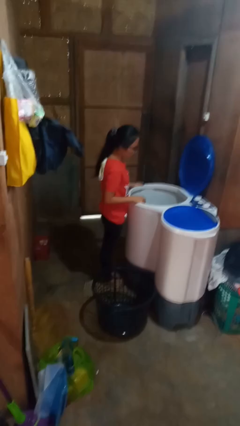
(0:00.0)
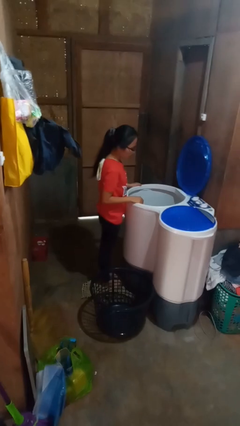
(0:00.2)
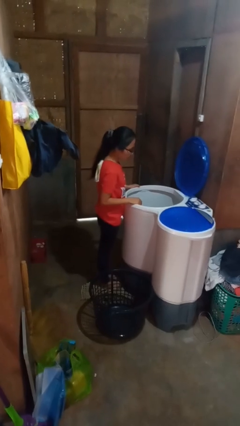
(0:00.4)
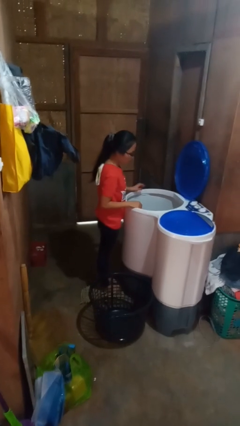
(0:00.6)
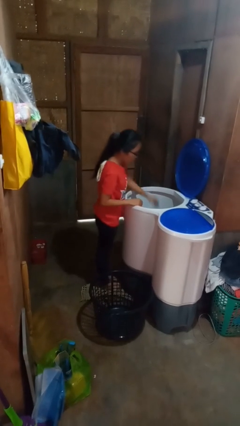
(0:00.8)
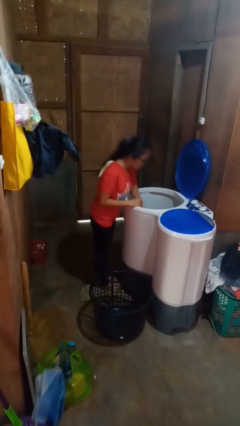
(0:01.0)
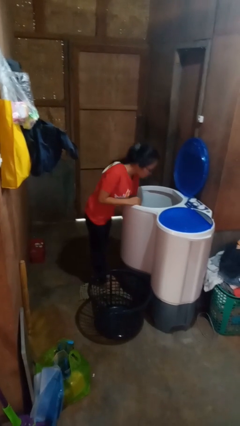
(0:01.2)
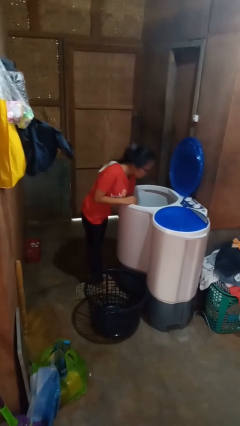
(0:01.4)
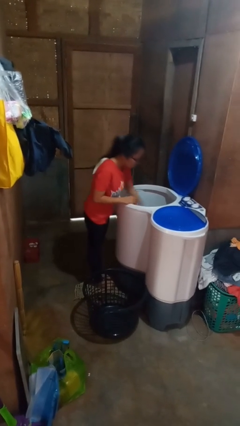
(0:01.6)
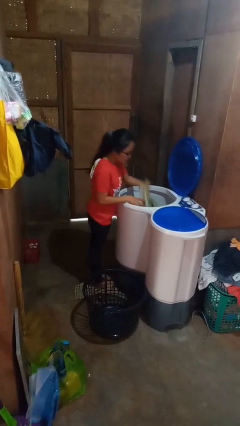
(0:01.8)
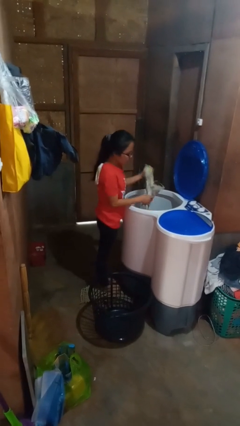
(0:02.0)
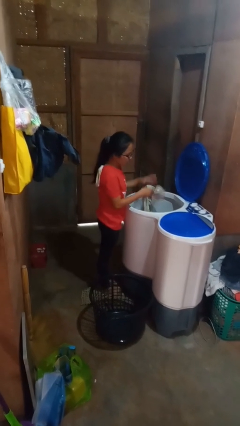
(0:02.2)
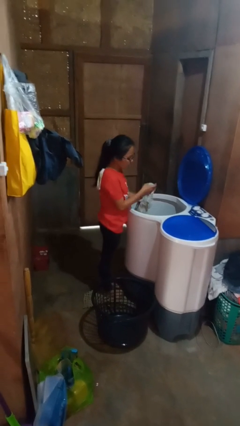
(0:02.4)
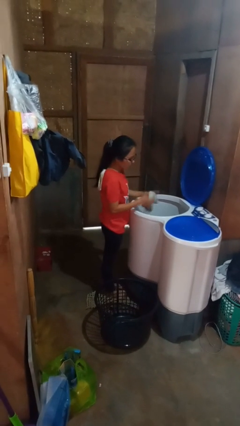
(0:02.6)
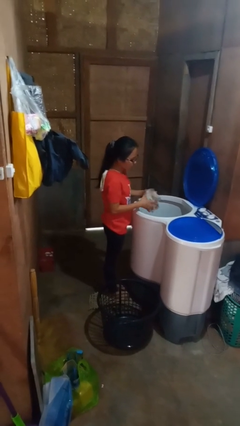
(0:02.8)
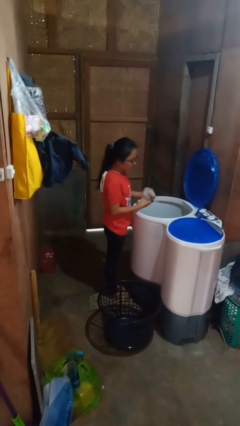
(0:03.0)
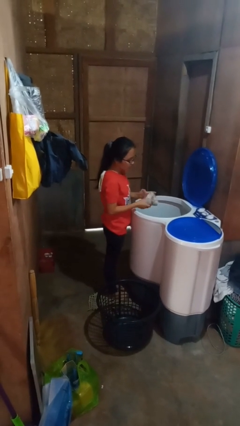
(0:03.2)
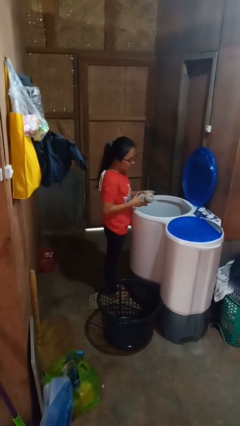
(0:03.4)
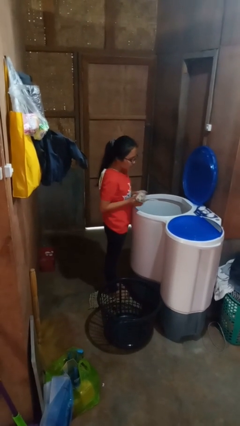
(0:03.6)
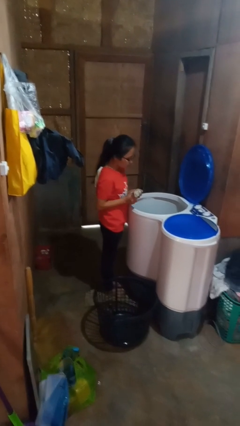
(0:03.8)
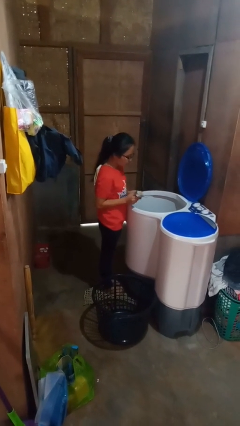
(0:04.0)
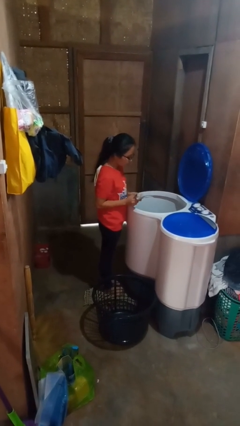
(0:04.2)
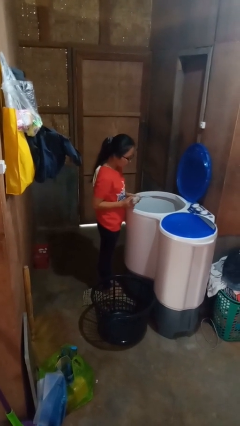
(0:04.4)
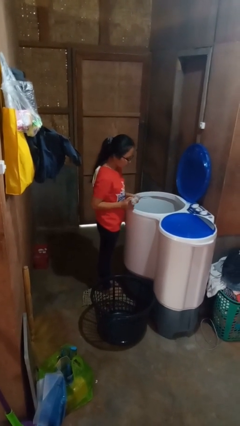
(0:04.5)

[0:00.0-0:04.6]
person loads clotheswasher

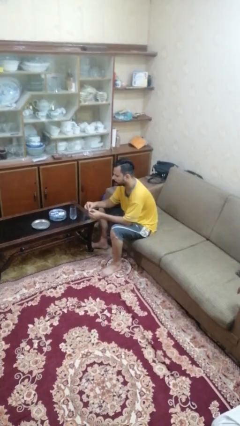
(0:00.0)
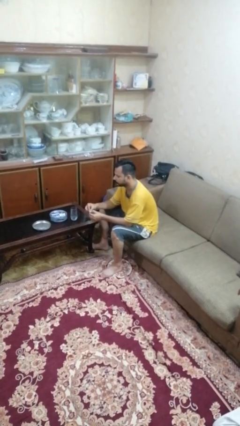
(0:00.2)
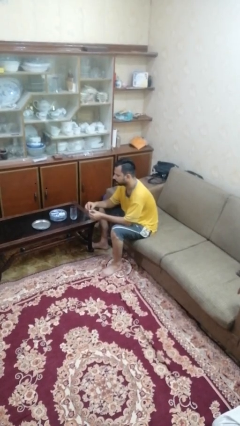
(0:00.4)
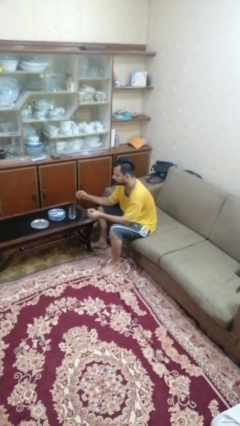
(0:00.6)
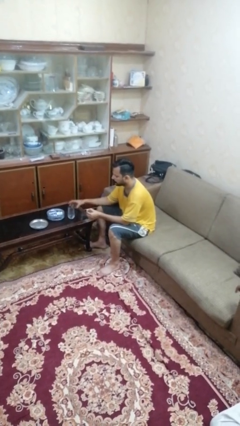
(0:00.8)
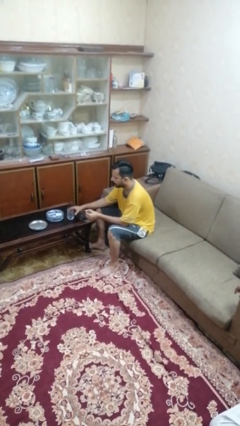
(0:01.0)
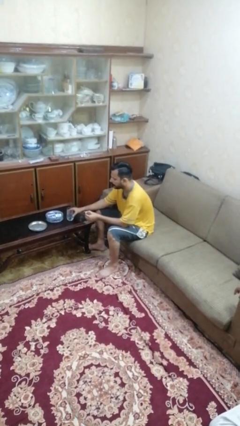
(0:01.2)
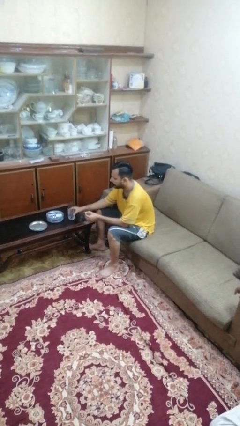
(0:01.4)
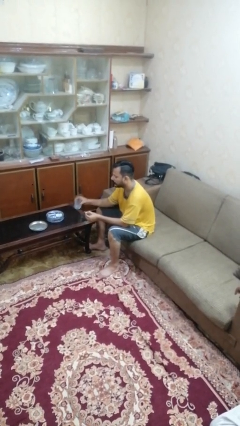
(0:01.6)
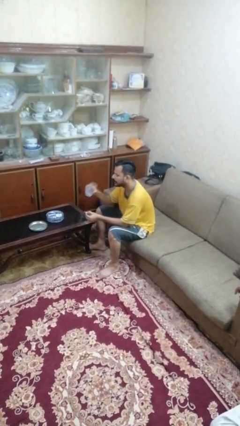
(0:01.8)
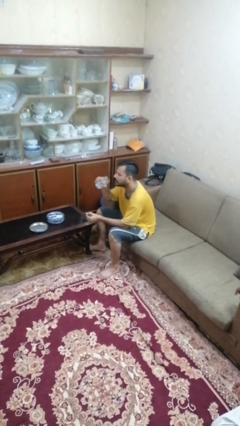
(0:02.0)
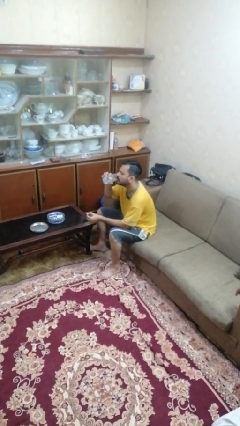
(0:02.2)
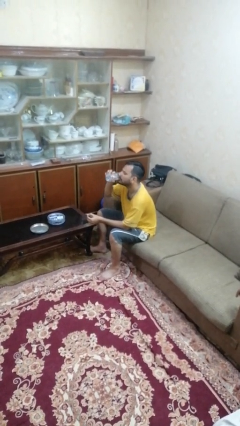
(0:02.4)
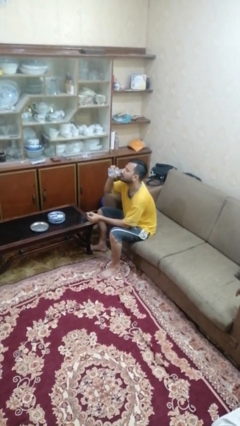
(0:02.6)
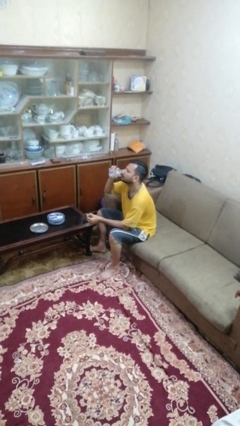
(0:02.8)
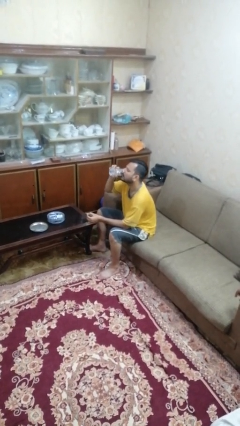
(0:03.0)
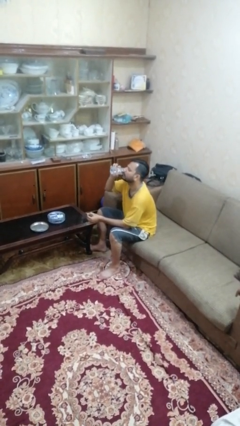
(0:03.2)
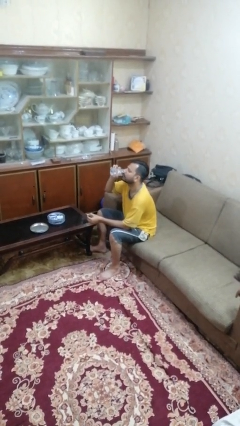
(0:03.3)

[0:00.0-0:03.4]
person drinks from cup

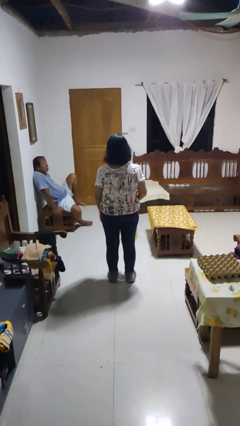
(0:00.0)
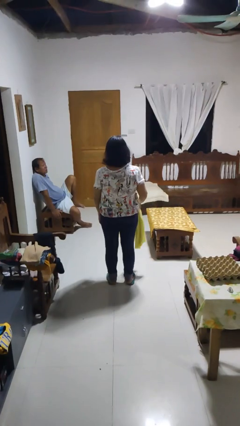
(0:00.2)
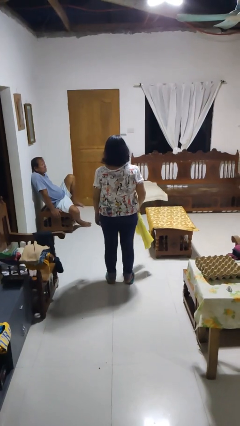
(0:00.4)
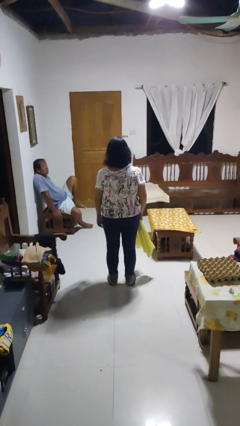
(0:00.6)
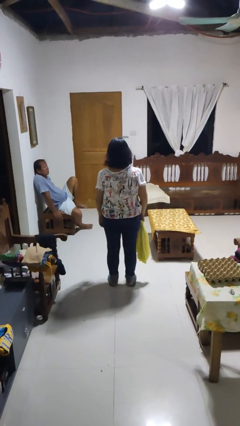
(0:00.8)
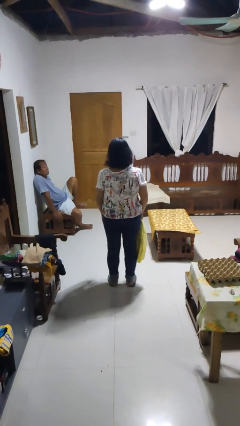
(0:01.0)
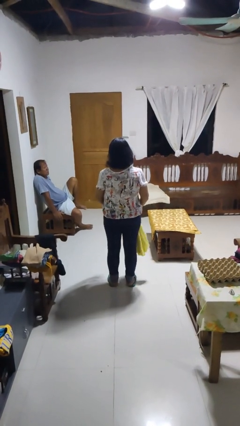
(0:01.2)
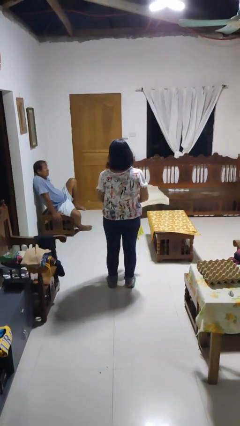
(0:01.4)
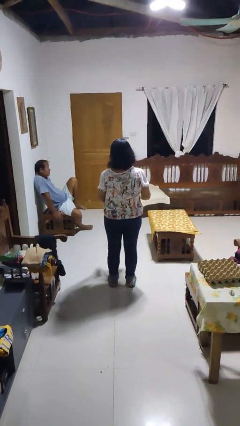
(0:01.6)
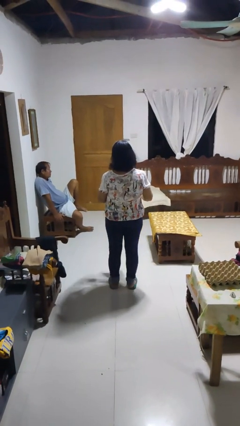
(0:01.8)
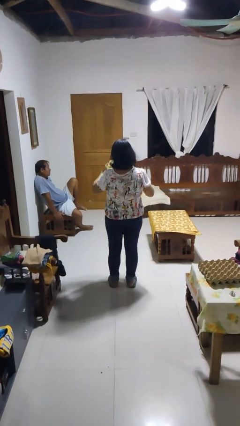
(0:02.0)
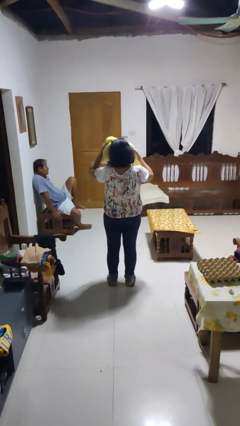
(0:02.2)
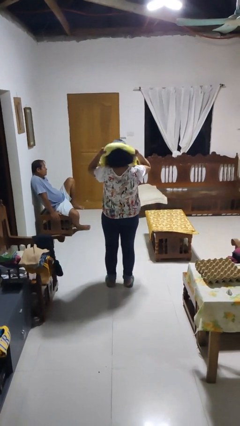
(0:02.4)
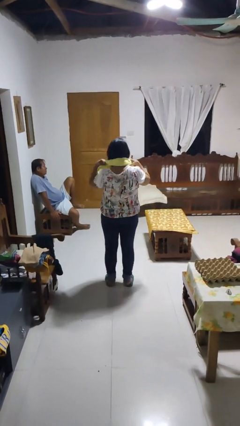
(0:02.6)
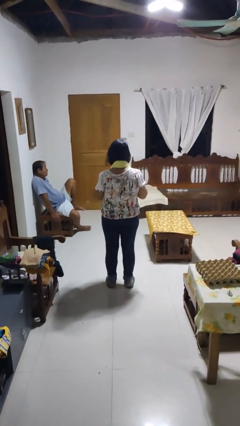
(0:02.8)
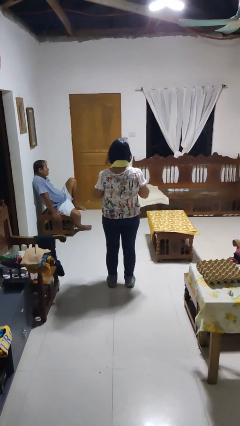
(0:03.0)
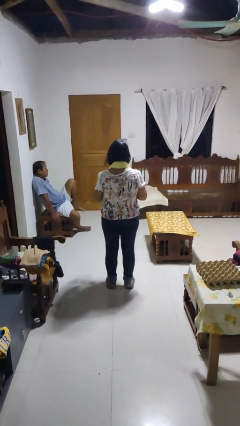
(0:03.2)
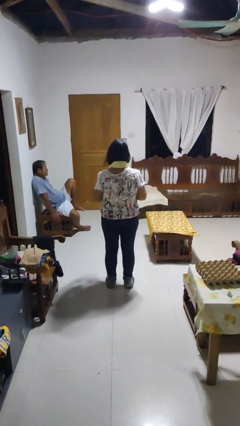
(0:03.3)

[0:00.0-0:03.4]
person puts on scarf

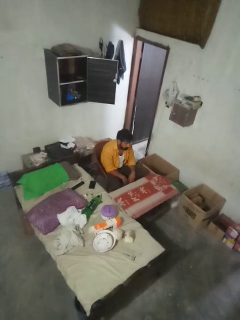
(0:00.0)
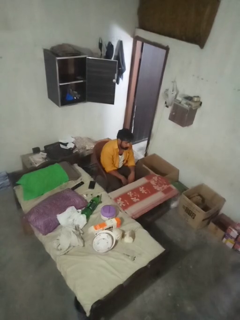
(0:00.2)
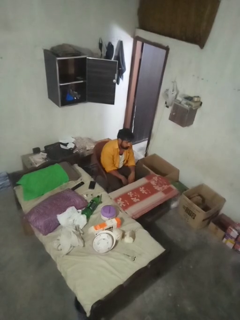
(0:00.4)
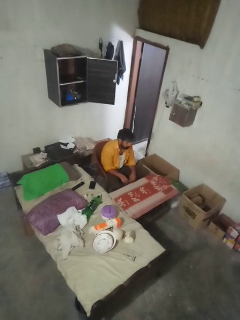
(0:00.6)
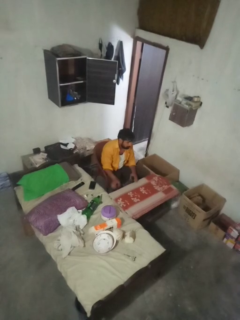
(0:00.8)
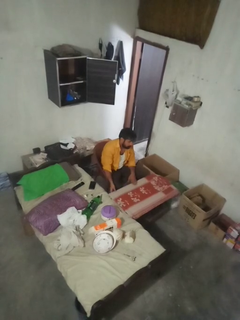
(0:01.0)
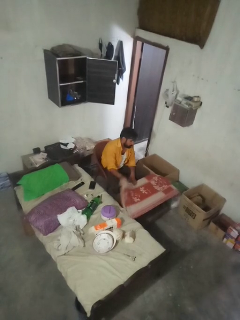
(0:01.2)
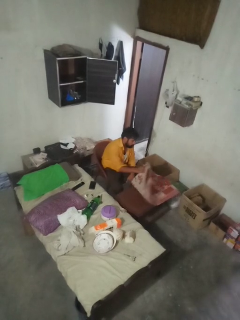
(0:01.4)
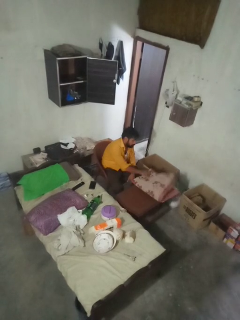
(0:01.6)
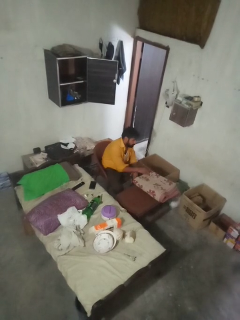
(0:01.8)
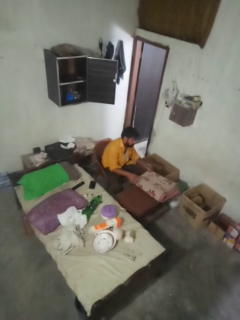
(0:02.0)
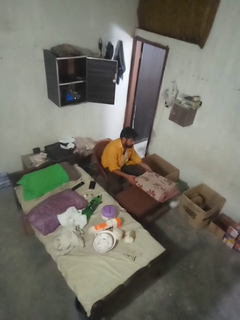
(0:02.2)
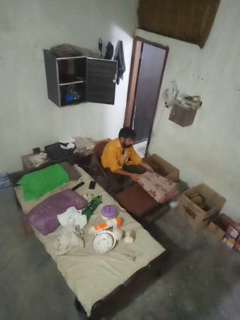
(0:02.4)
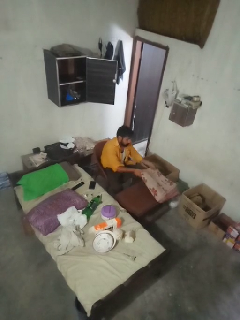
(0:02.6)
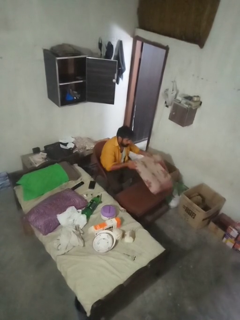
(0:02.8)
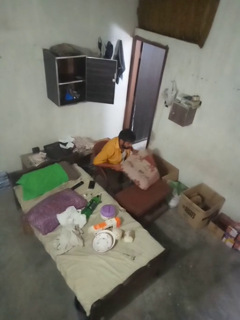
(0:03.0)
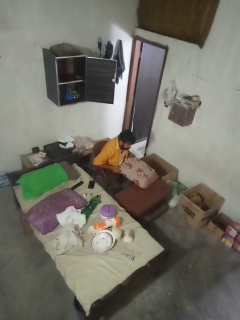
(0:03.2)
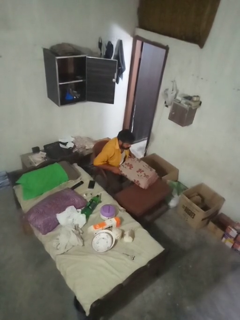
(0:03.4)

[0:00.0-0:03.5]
person folds tablecloth

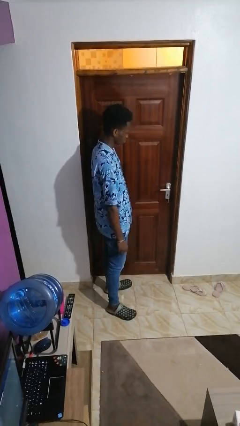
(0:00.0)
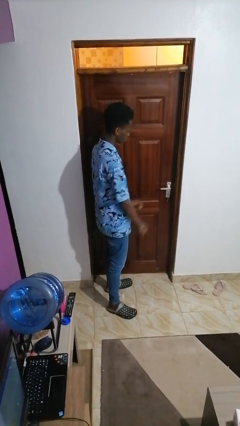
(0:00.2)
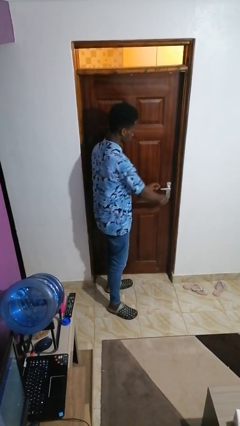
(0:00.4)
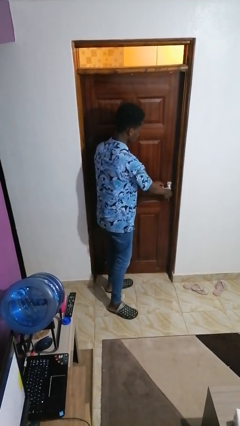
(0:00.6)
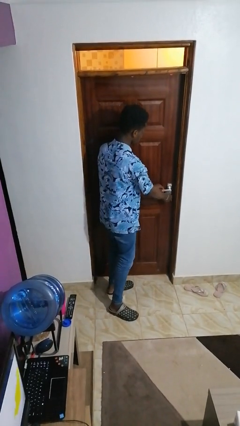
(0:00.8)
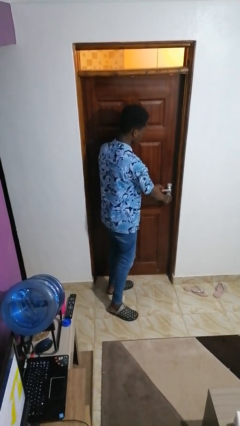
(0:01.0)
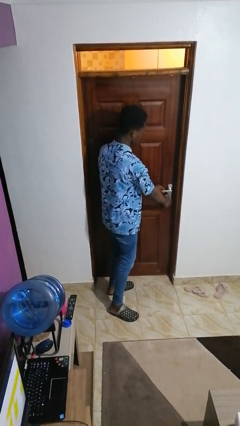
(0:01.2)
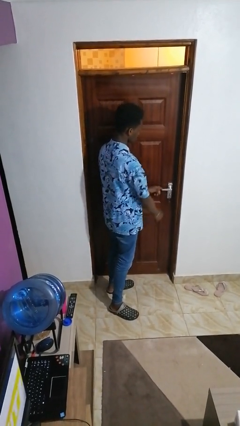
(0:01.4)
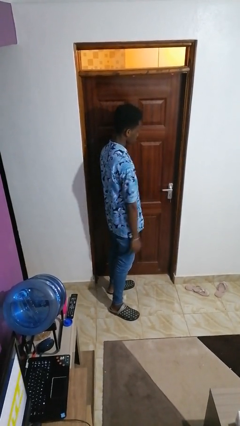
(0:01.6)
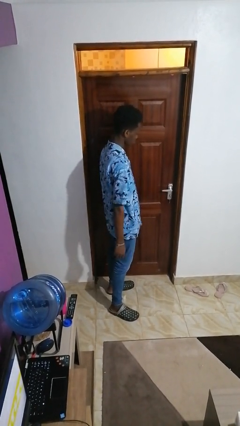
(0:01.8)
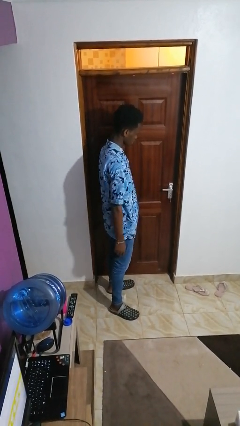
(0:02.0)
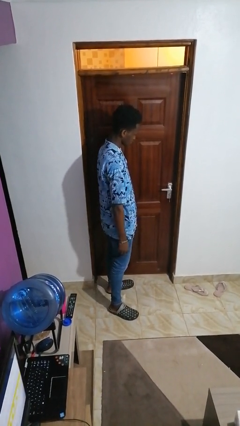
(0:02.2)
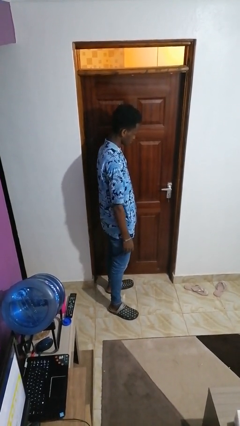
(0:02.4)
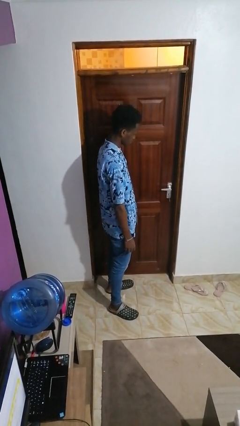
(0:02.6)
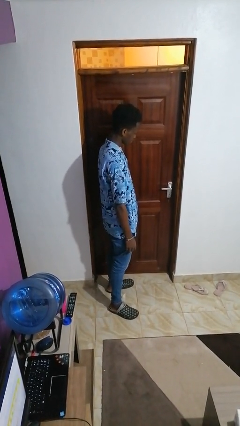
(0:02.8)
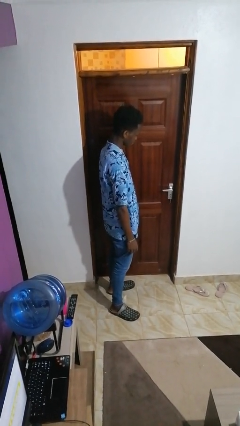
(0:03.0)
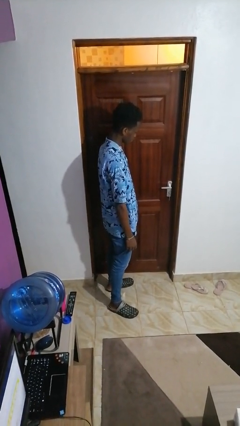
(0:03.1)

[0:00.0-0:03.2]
person unlocks door with keys

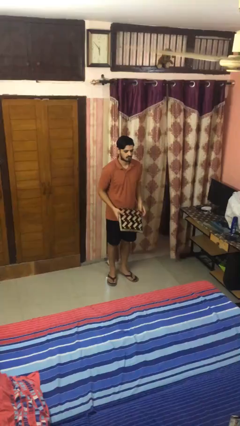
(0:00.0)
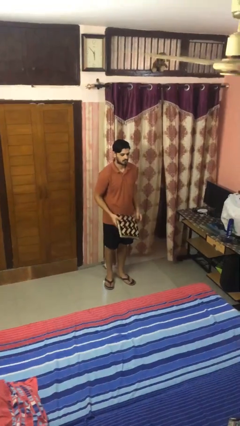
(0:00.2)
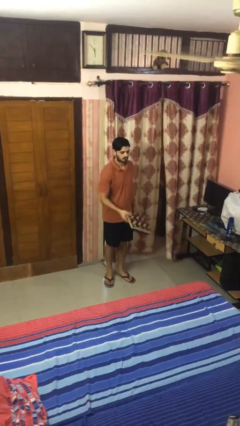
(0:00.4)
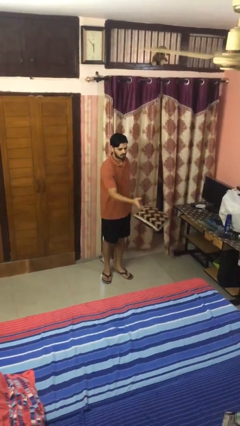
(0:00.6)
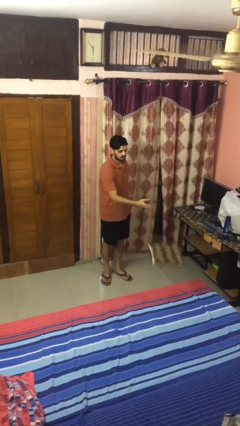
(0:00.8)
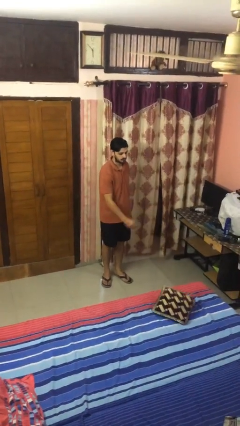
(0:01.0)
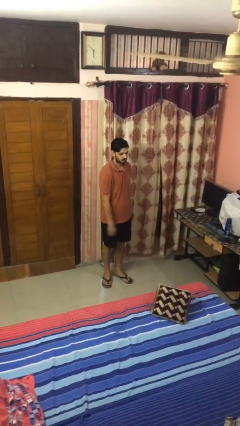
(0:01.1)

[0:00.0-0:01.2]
person throws object on bed
